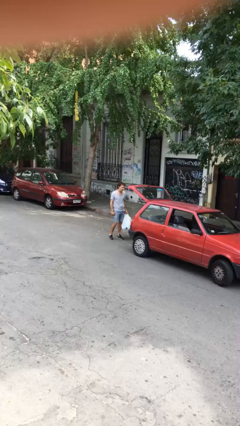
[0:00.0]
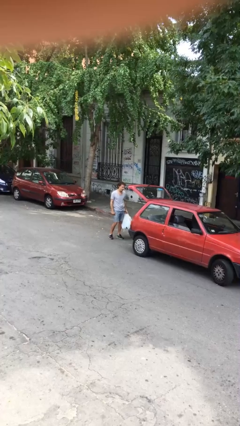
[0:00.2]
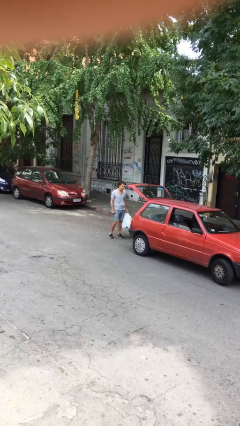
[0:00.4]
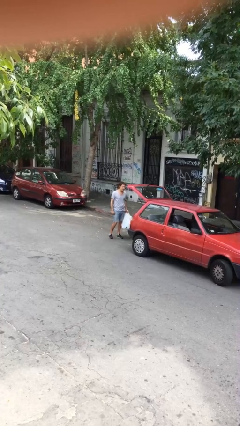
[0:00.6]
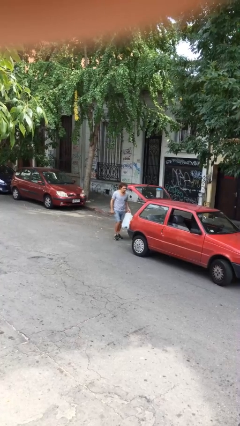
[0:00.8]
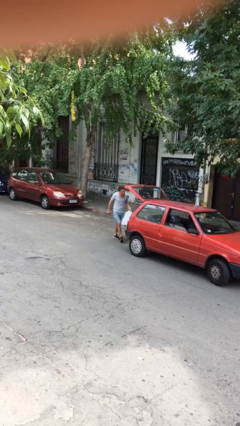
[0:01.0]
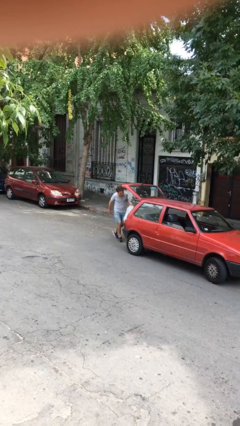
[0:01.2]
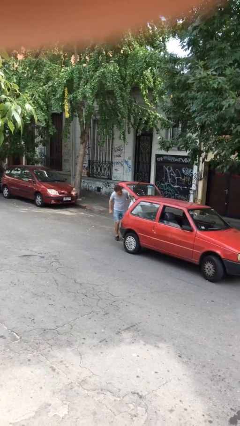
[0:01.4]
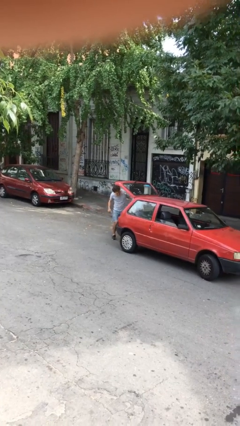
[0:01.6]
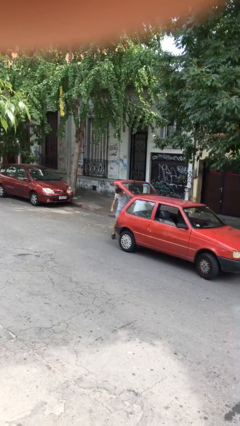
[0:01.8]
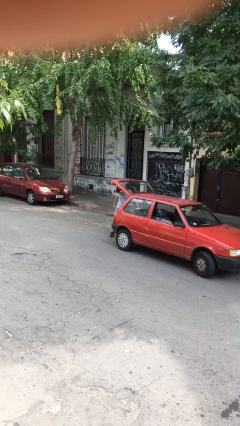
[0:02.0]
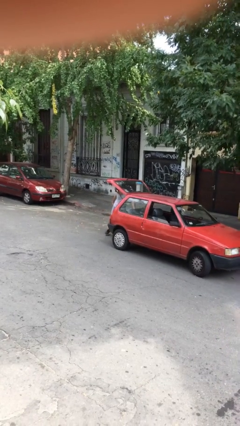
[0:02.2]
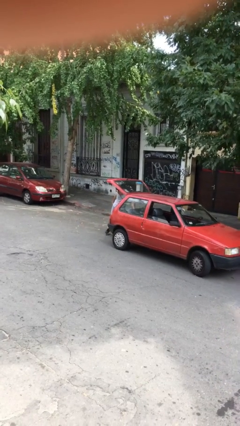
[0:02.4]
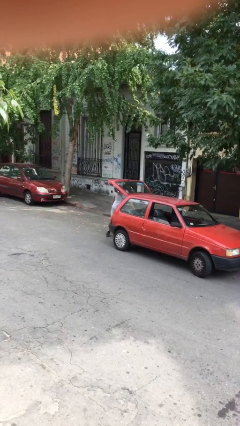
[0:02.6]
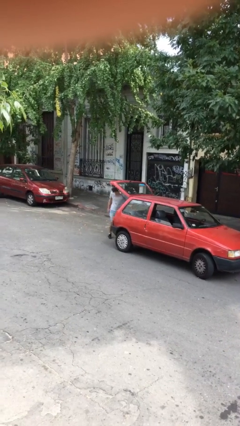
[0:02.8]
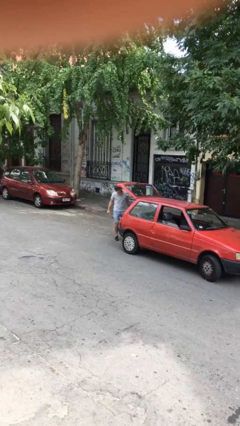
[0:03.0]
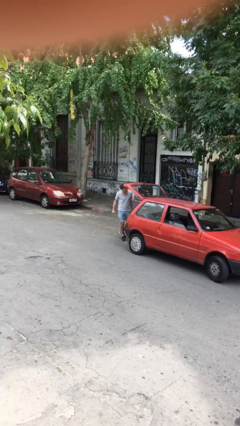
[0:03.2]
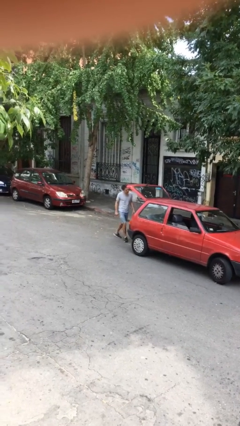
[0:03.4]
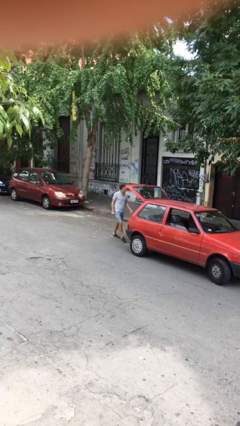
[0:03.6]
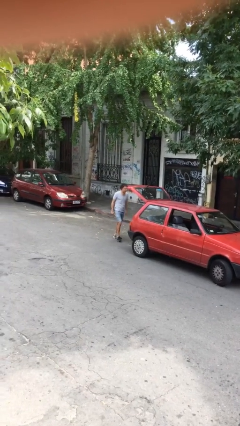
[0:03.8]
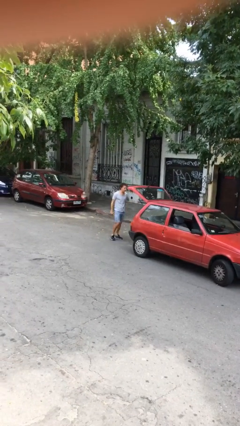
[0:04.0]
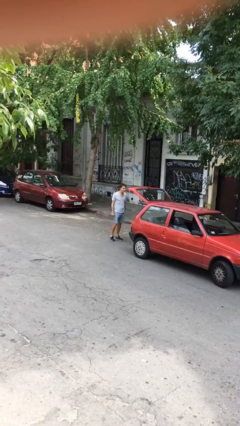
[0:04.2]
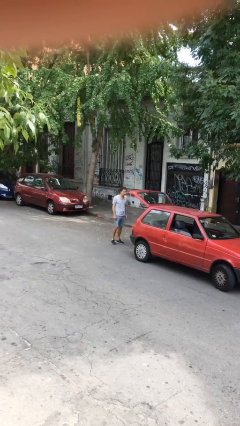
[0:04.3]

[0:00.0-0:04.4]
person loads car

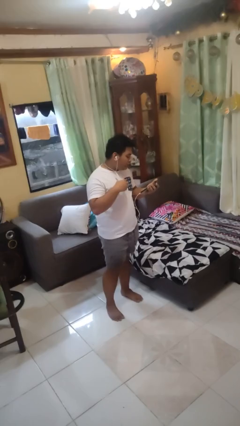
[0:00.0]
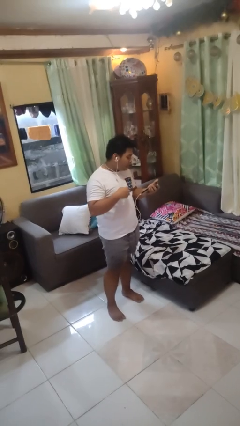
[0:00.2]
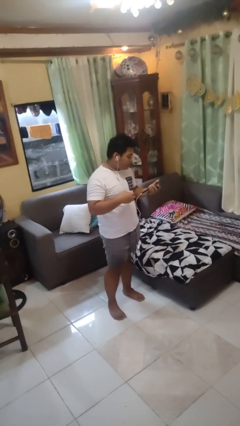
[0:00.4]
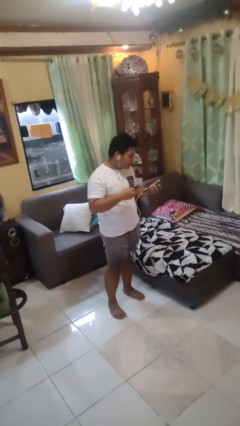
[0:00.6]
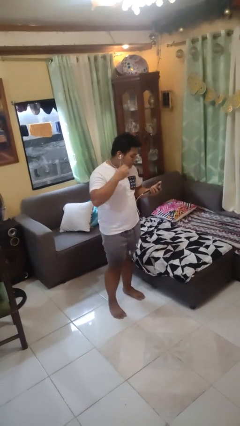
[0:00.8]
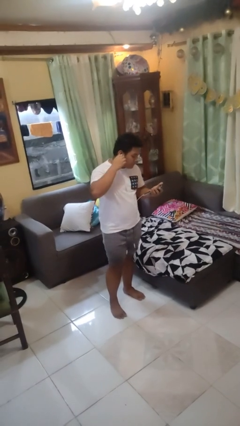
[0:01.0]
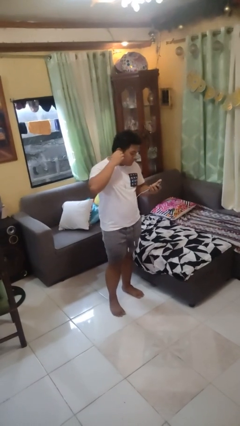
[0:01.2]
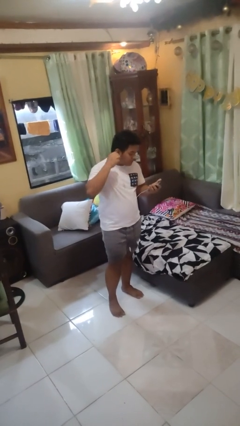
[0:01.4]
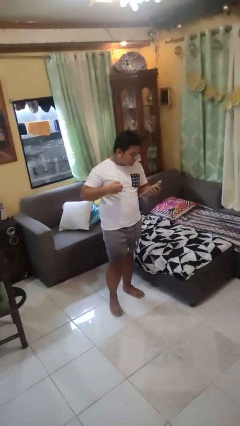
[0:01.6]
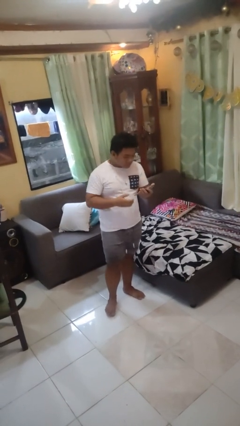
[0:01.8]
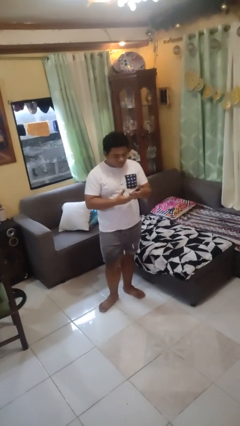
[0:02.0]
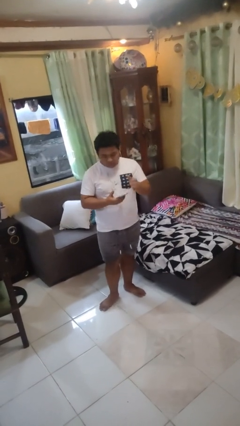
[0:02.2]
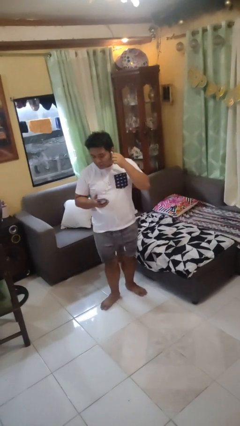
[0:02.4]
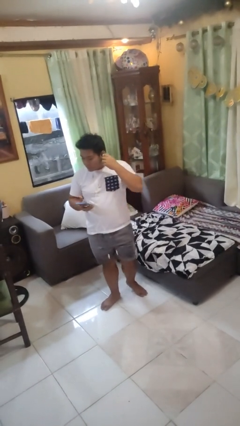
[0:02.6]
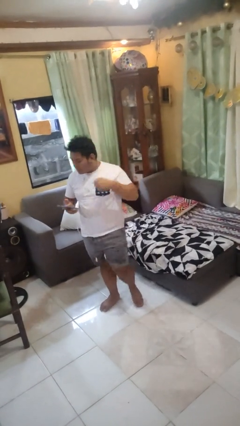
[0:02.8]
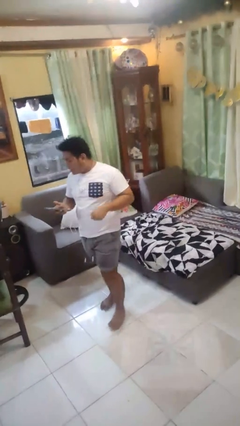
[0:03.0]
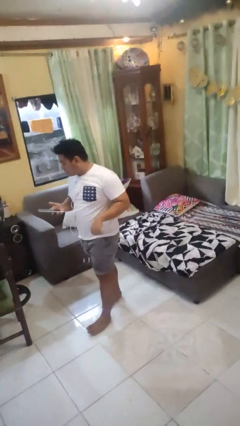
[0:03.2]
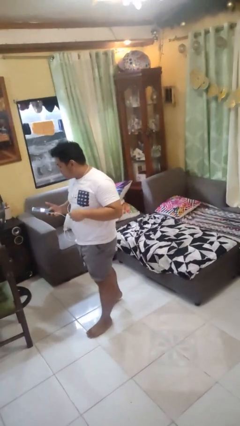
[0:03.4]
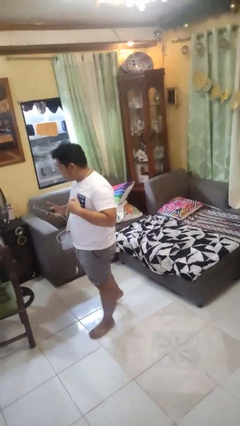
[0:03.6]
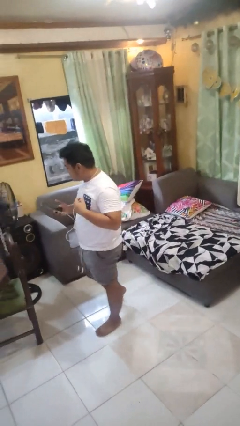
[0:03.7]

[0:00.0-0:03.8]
person takes off headphones

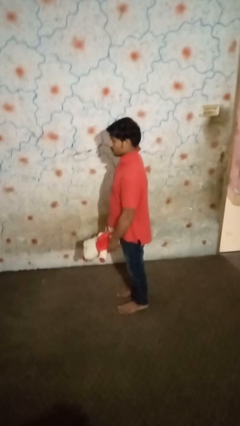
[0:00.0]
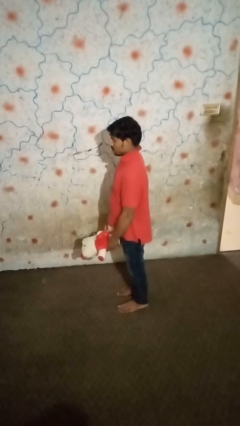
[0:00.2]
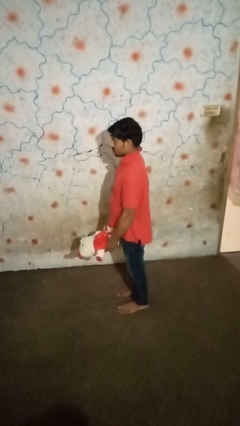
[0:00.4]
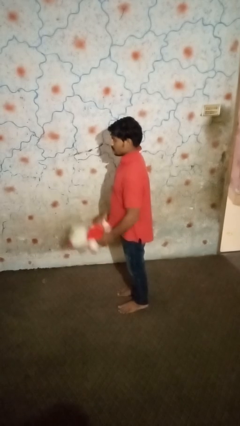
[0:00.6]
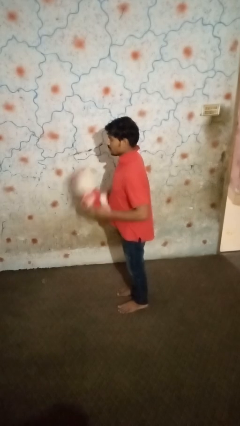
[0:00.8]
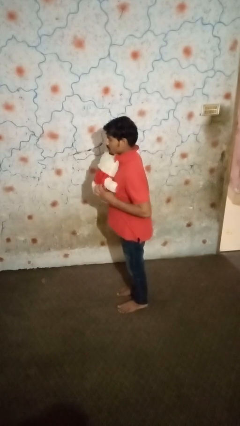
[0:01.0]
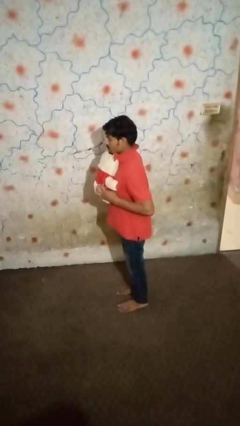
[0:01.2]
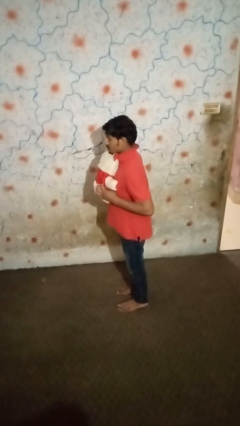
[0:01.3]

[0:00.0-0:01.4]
person hugs stuffed animal

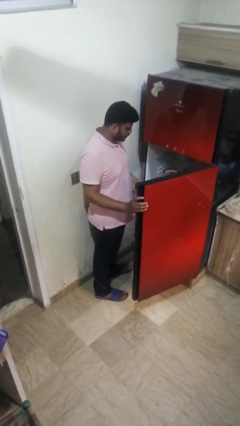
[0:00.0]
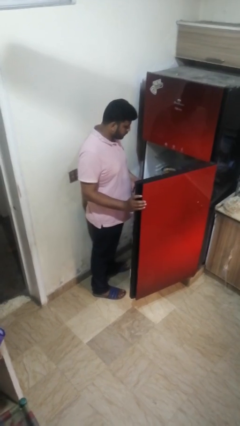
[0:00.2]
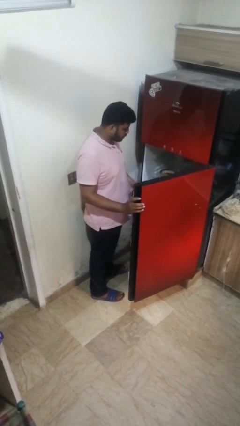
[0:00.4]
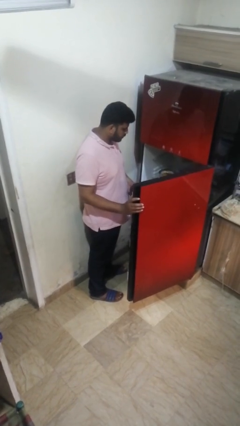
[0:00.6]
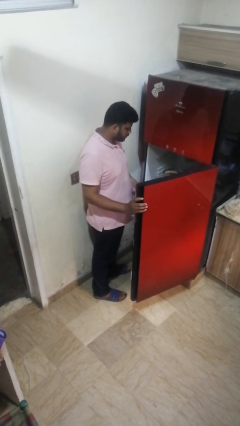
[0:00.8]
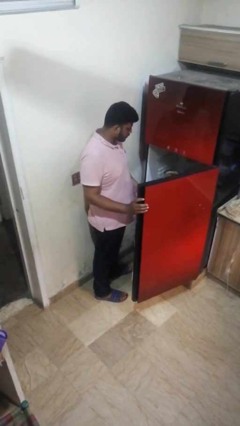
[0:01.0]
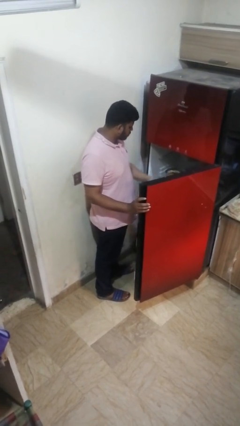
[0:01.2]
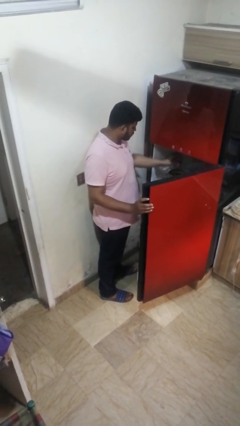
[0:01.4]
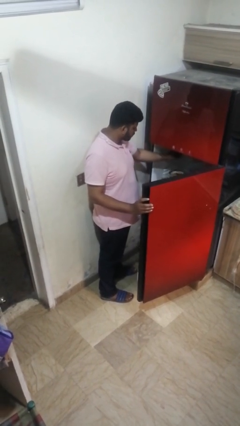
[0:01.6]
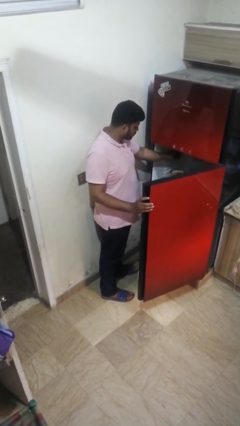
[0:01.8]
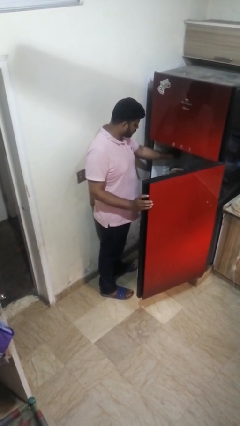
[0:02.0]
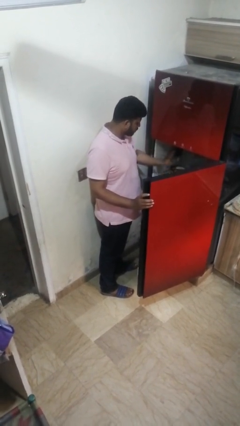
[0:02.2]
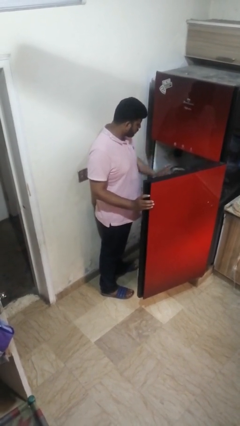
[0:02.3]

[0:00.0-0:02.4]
person puts object into refrigerator

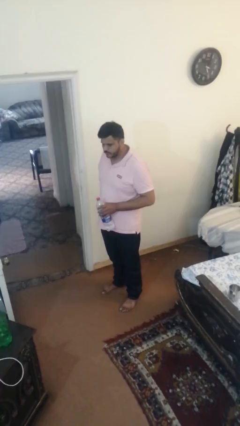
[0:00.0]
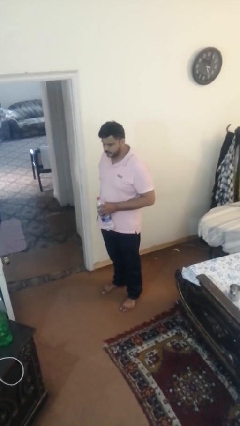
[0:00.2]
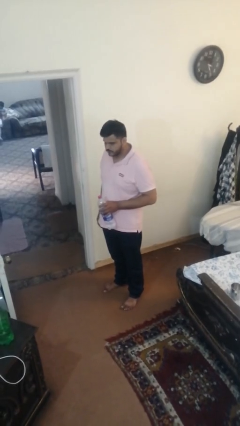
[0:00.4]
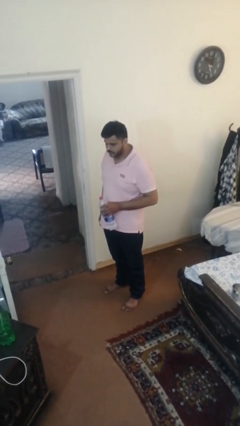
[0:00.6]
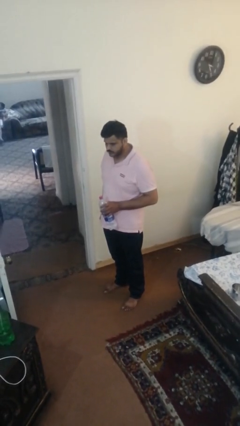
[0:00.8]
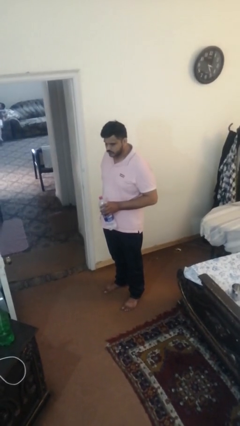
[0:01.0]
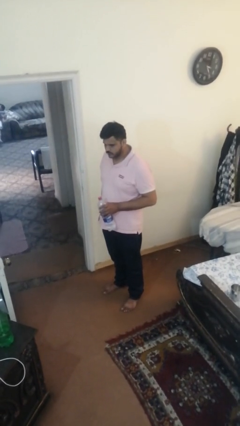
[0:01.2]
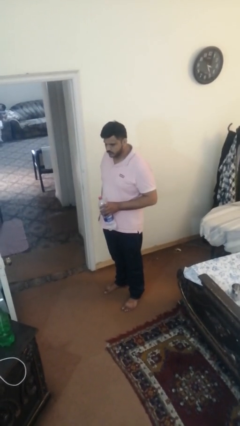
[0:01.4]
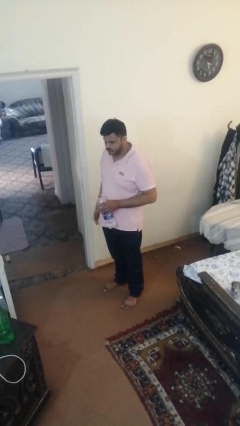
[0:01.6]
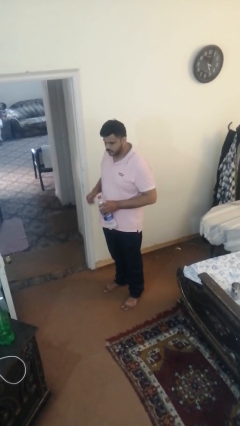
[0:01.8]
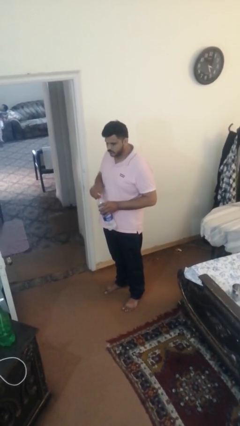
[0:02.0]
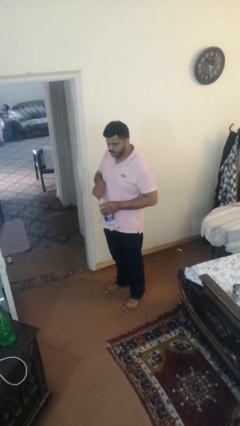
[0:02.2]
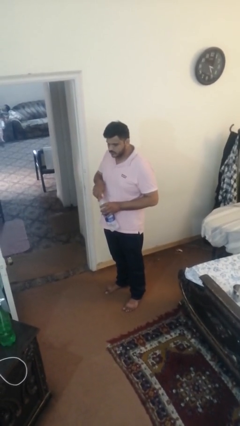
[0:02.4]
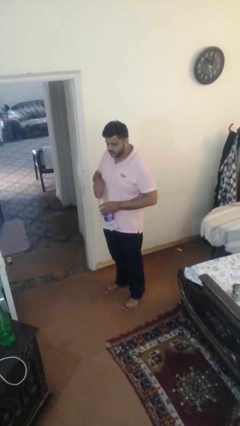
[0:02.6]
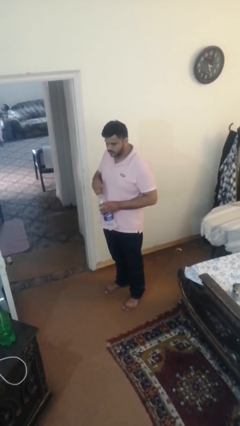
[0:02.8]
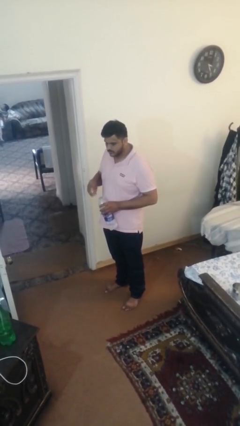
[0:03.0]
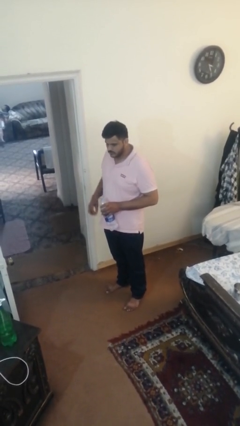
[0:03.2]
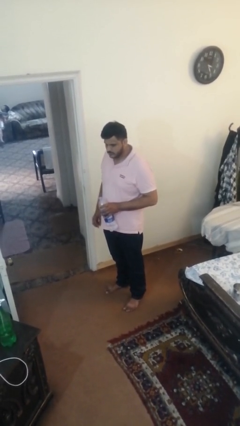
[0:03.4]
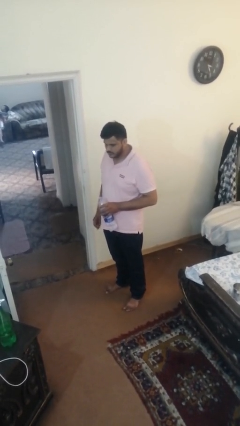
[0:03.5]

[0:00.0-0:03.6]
person unscrews lid from bottle

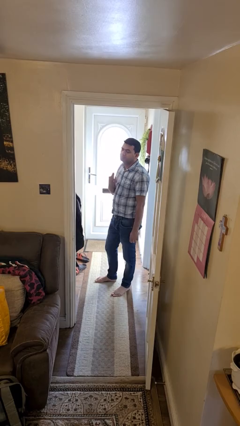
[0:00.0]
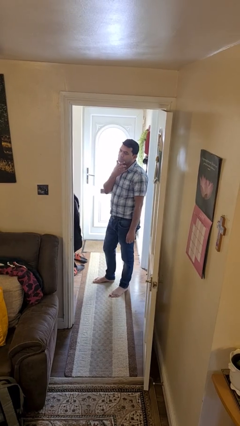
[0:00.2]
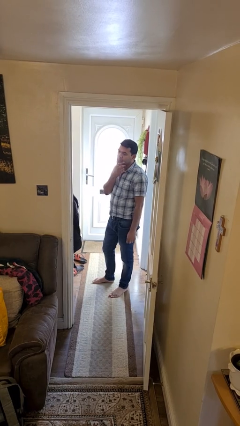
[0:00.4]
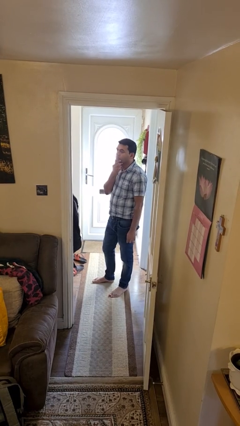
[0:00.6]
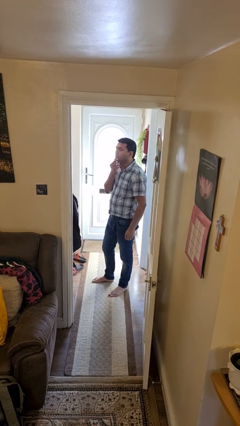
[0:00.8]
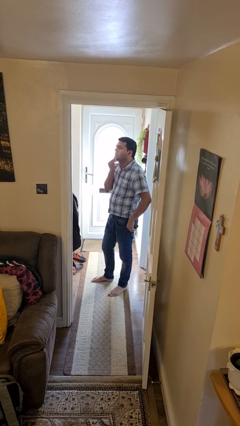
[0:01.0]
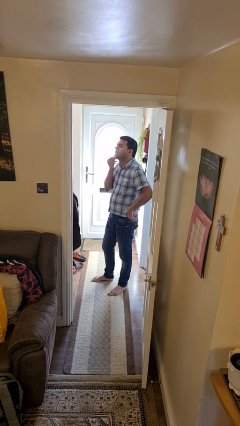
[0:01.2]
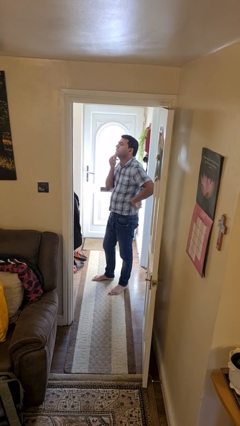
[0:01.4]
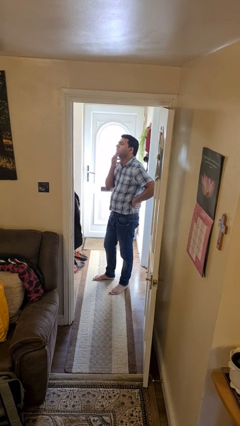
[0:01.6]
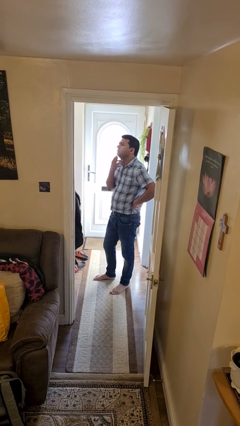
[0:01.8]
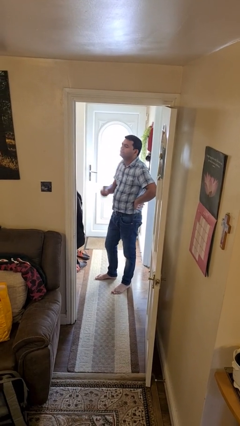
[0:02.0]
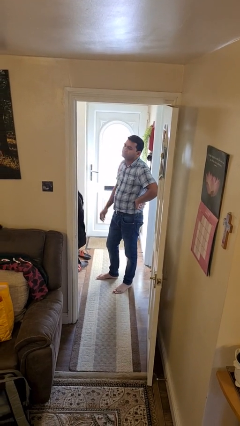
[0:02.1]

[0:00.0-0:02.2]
person strokes chin
